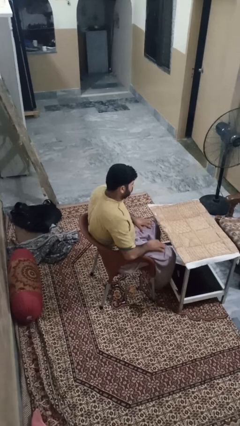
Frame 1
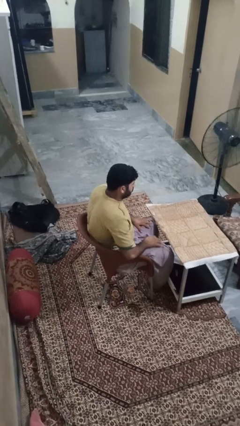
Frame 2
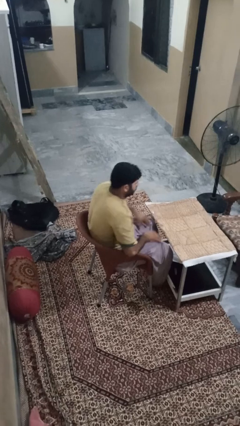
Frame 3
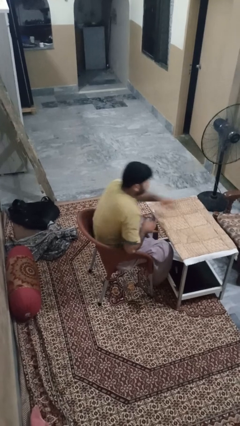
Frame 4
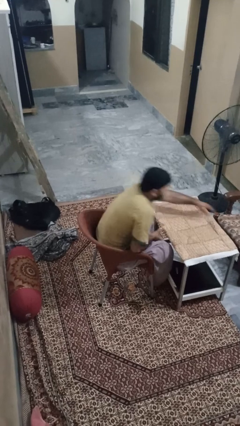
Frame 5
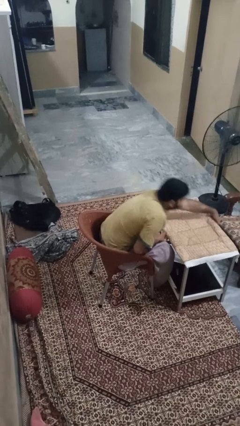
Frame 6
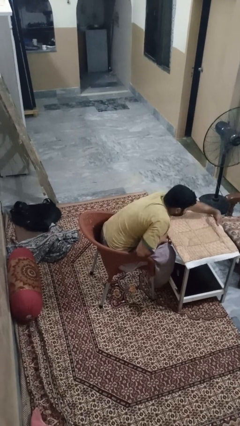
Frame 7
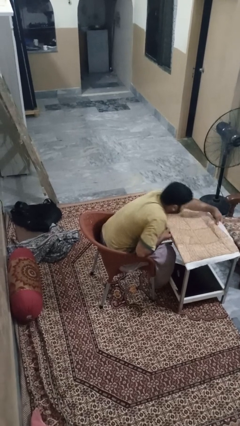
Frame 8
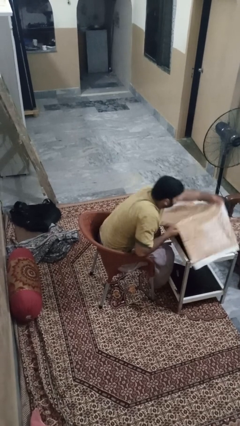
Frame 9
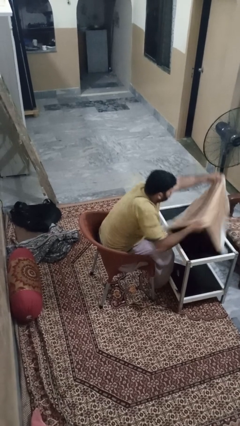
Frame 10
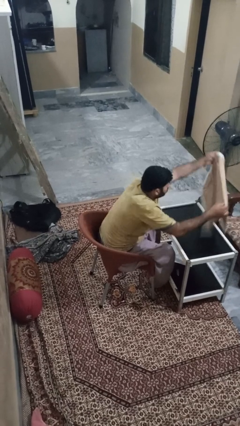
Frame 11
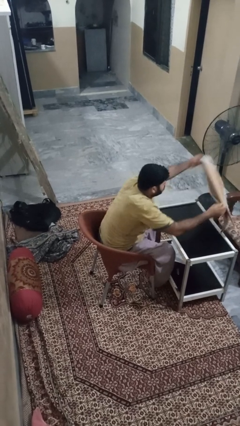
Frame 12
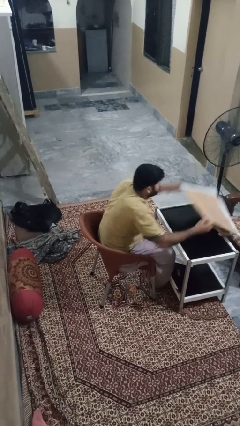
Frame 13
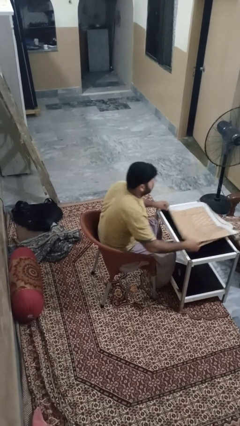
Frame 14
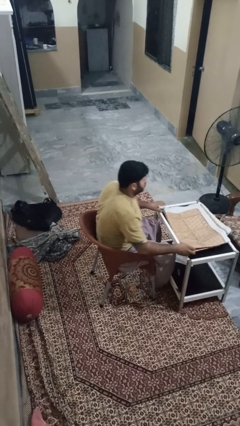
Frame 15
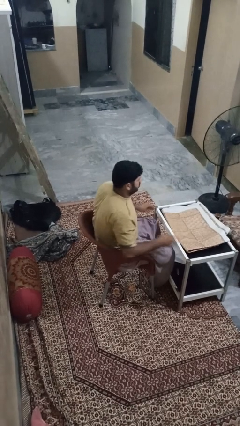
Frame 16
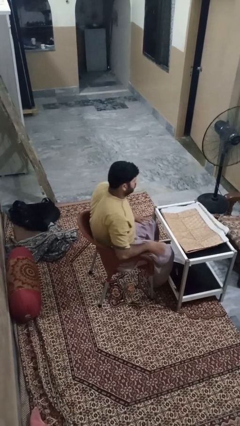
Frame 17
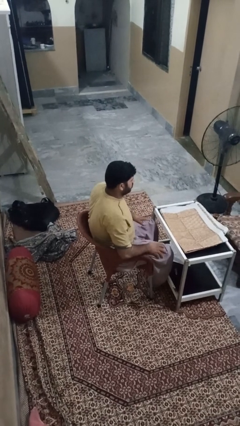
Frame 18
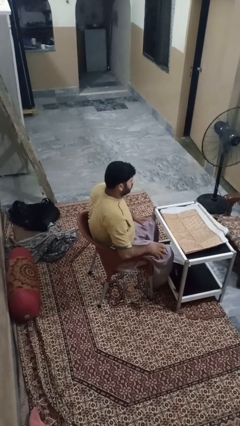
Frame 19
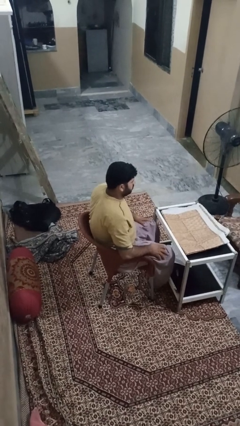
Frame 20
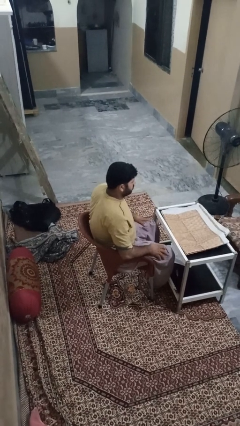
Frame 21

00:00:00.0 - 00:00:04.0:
person folds tablecloth

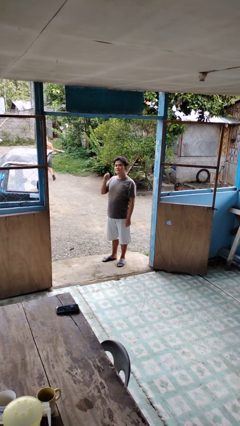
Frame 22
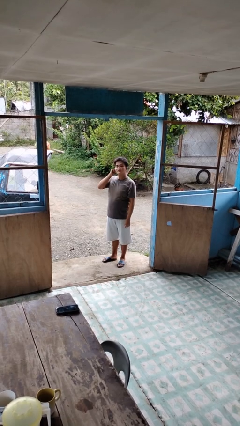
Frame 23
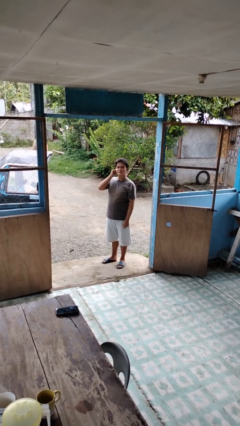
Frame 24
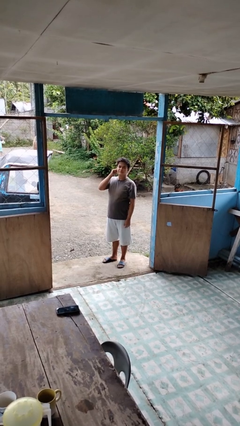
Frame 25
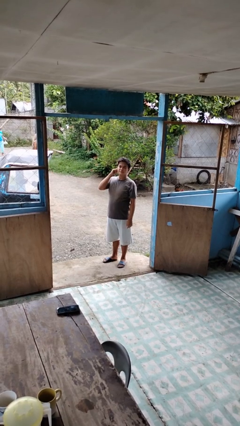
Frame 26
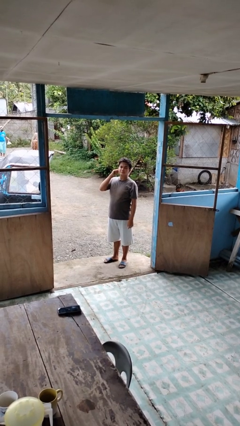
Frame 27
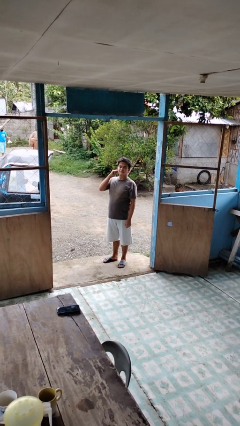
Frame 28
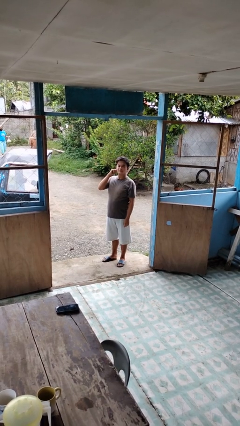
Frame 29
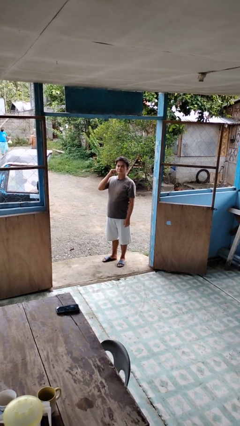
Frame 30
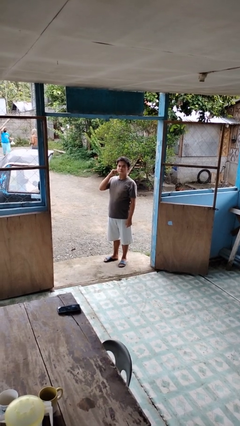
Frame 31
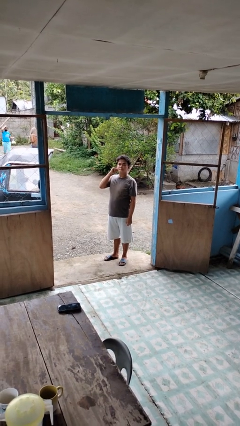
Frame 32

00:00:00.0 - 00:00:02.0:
person touches earlobe

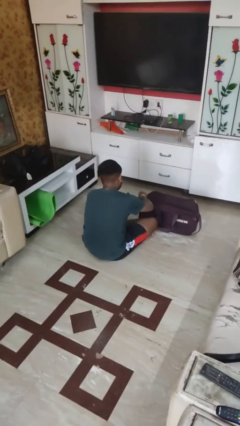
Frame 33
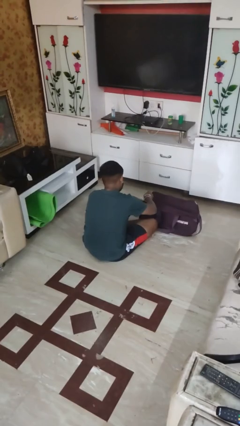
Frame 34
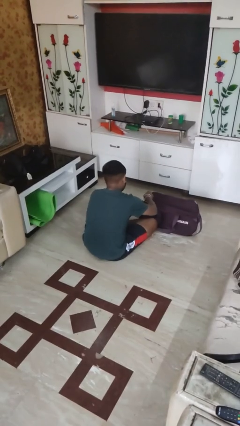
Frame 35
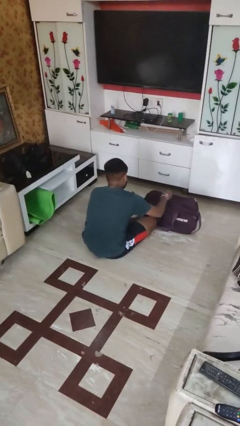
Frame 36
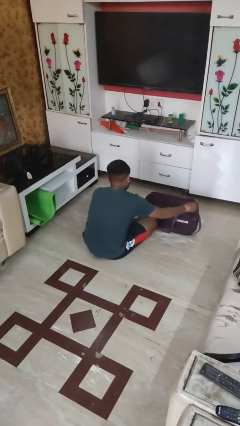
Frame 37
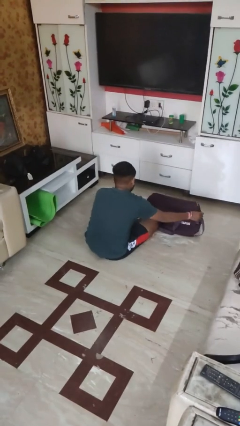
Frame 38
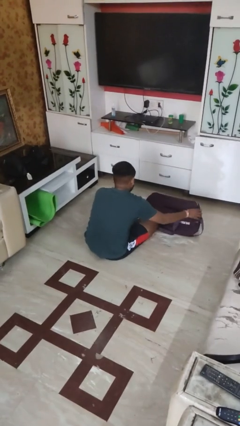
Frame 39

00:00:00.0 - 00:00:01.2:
person opens suitcase

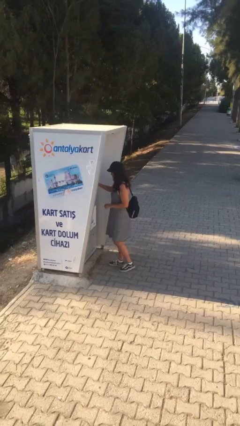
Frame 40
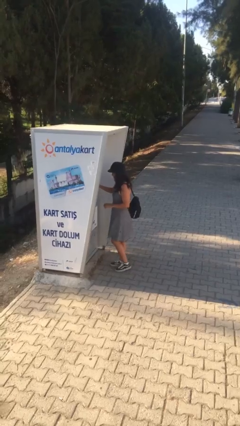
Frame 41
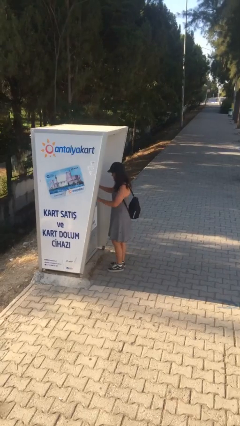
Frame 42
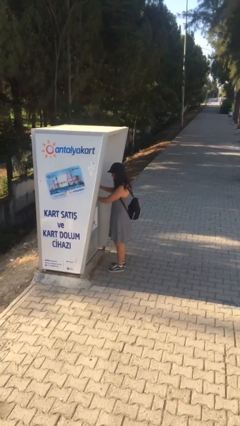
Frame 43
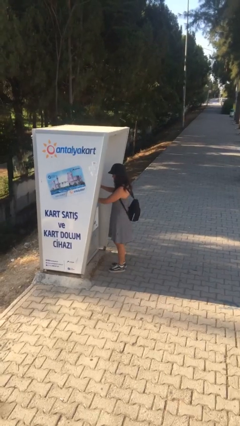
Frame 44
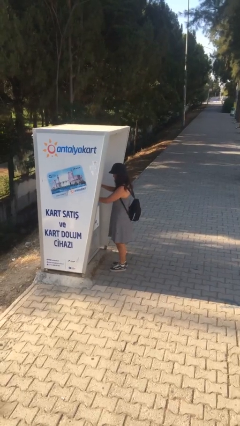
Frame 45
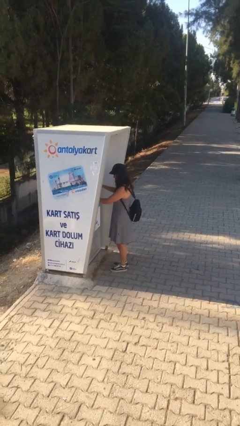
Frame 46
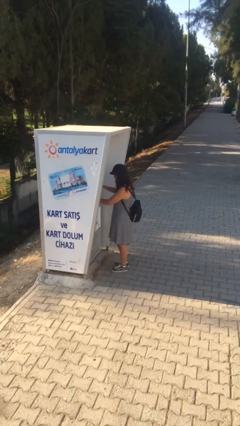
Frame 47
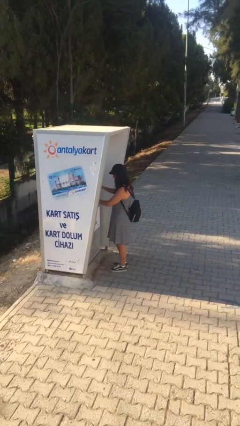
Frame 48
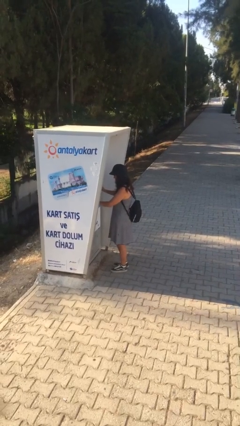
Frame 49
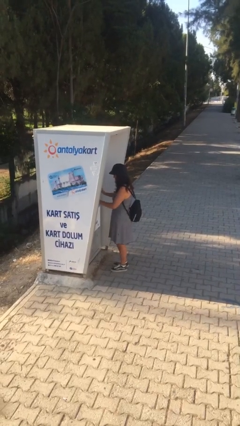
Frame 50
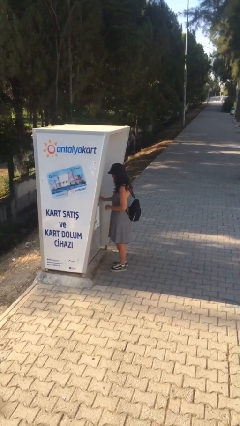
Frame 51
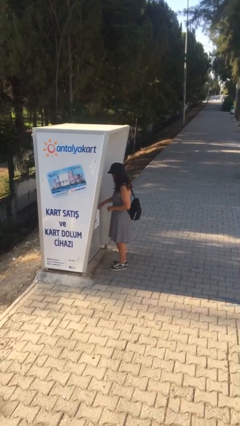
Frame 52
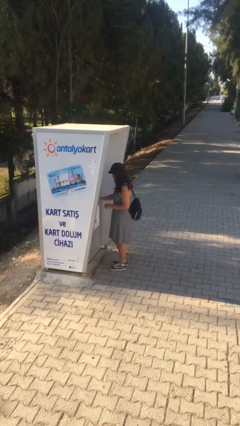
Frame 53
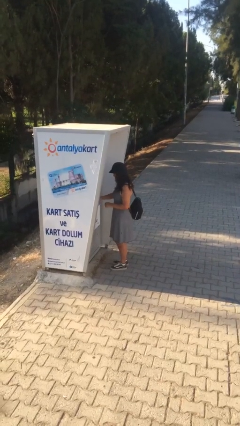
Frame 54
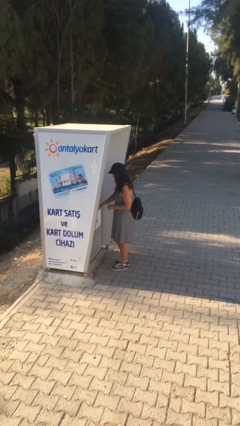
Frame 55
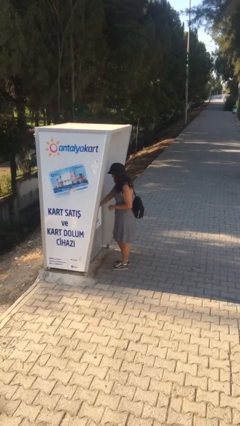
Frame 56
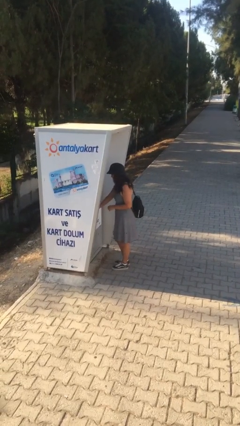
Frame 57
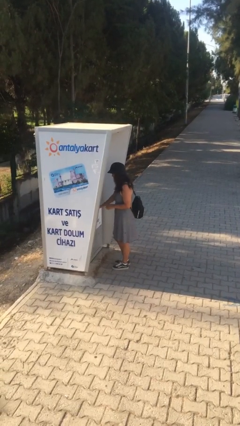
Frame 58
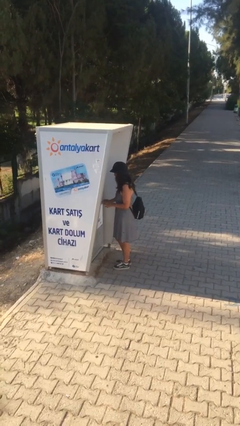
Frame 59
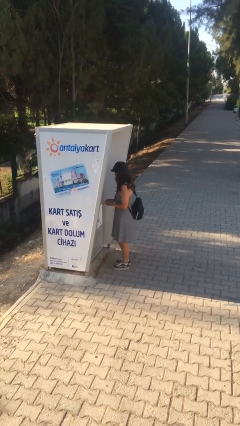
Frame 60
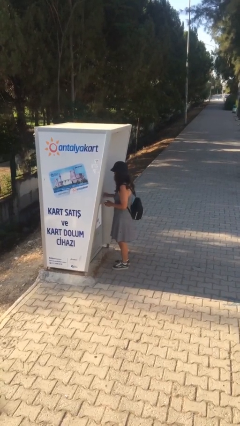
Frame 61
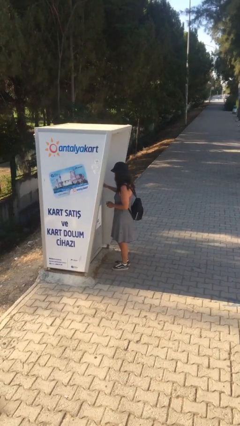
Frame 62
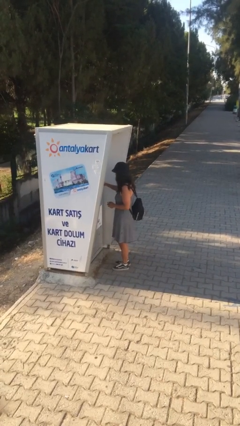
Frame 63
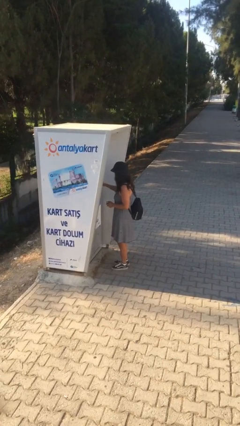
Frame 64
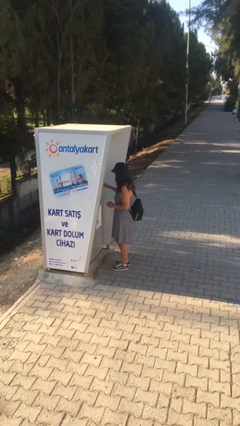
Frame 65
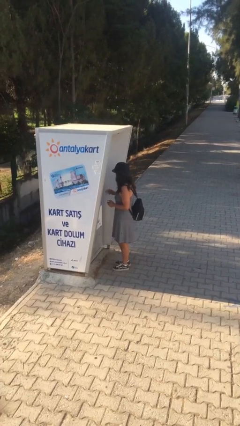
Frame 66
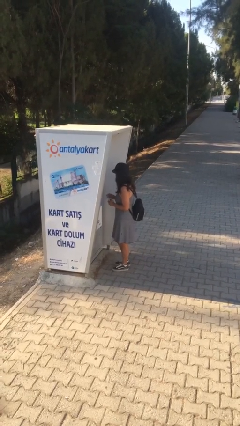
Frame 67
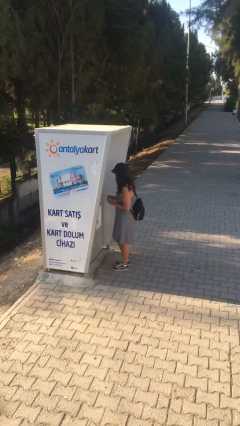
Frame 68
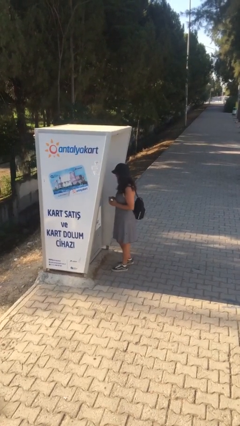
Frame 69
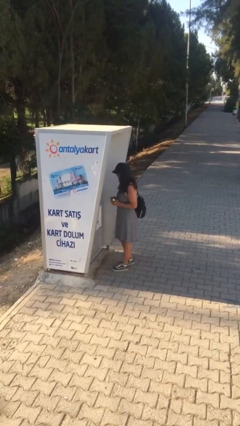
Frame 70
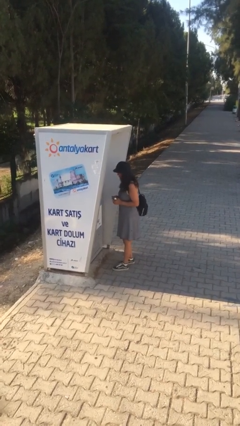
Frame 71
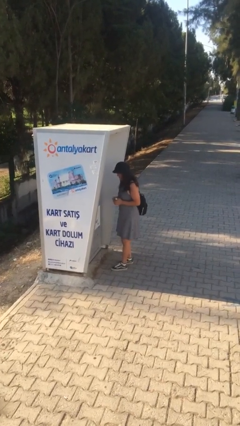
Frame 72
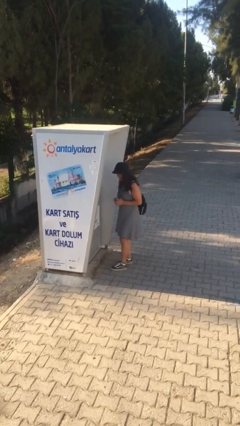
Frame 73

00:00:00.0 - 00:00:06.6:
person purchases from machine

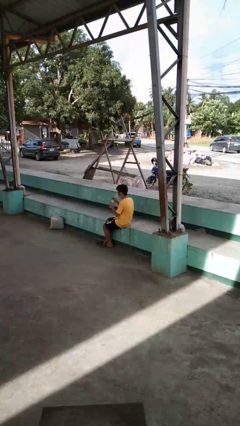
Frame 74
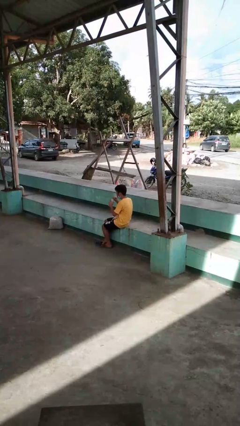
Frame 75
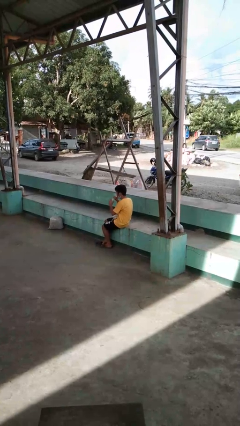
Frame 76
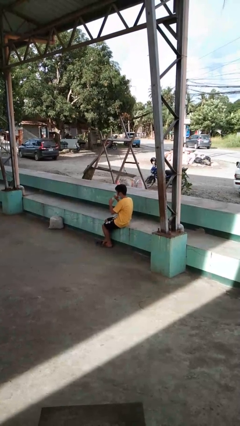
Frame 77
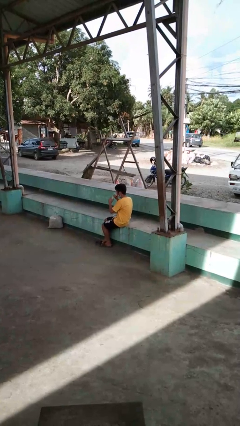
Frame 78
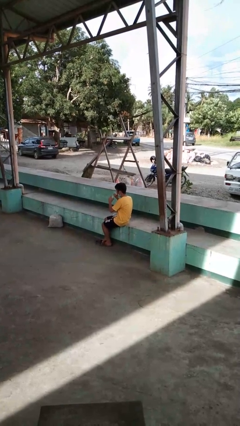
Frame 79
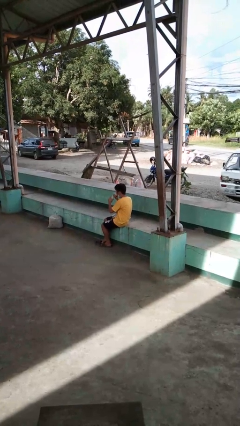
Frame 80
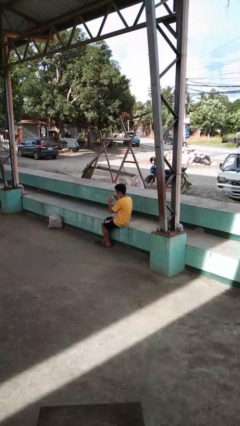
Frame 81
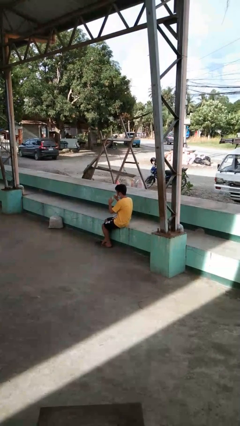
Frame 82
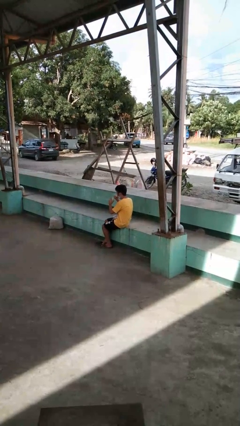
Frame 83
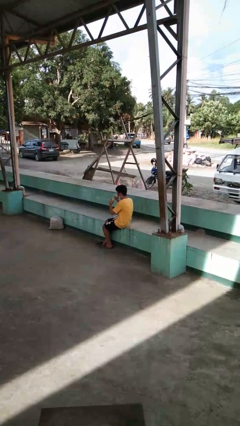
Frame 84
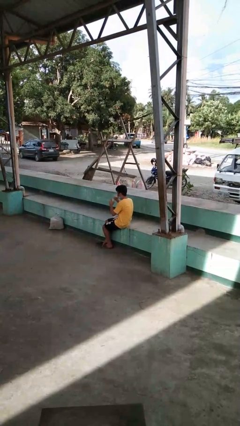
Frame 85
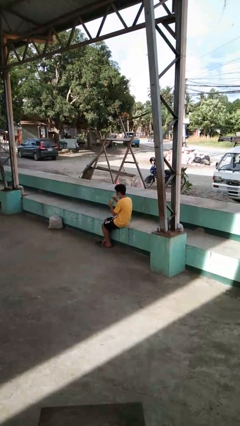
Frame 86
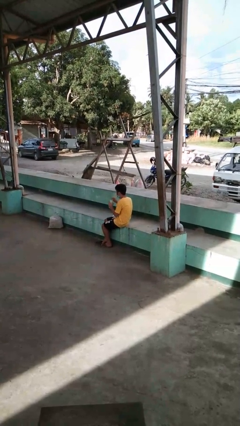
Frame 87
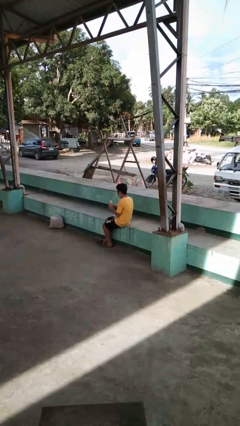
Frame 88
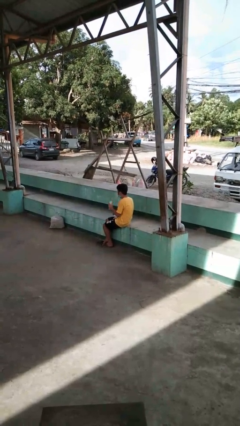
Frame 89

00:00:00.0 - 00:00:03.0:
person drinks from straw

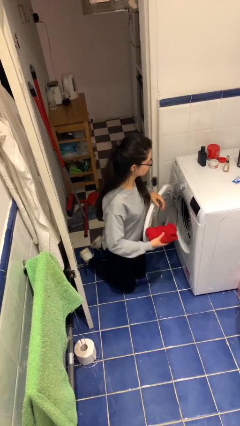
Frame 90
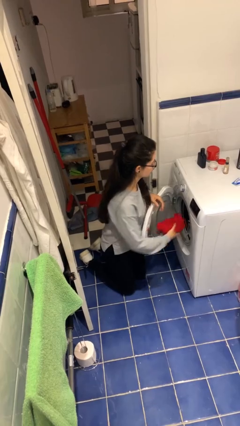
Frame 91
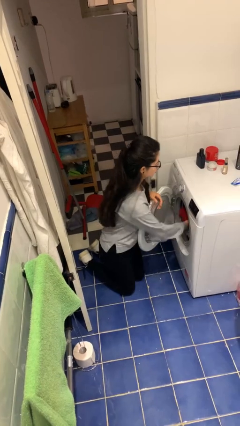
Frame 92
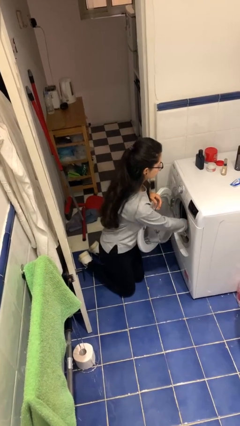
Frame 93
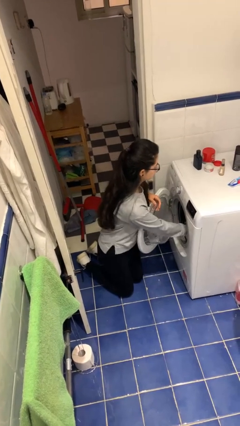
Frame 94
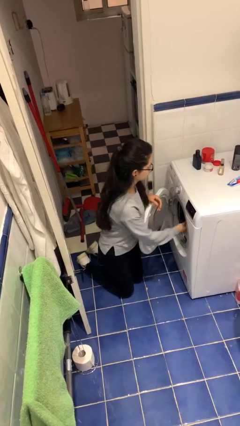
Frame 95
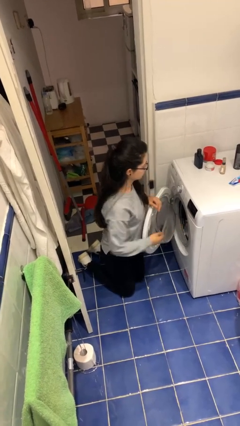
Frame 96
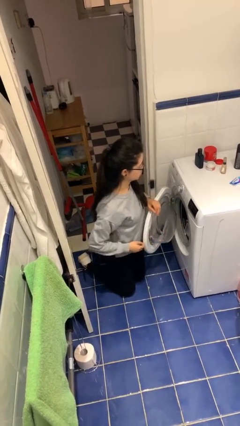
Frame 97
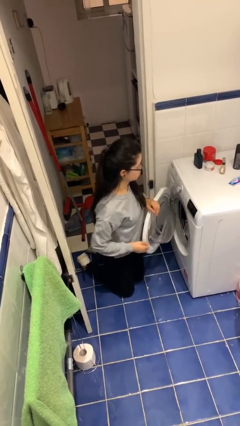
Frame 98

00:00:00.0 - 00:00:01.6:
person loads dryer
